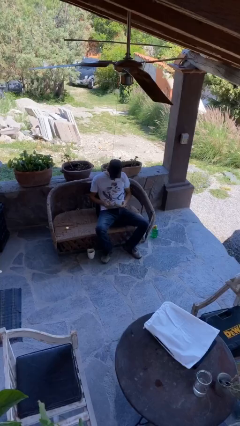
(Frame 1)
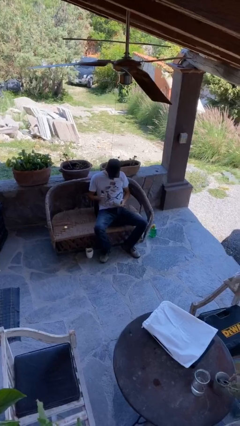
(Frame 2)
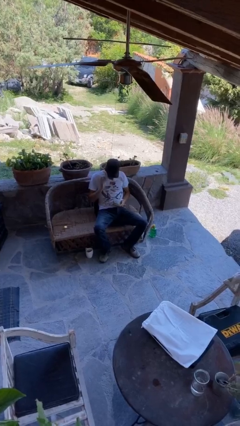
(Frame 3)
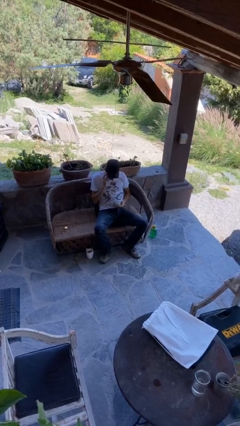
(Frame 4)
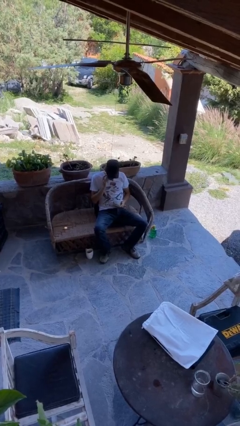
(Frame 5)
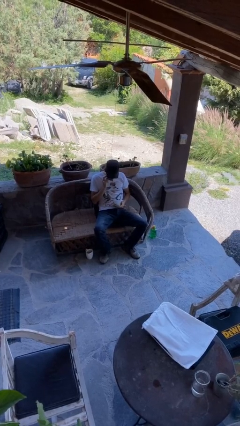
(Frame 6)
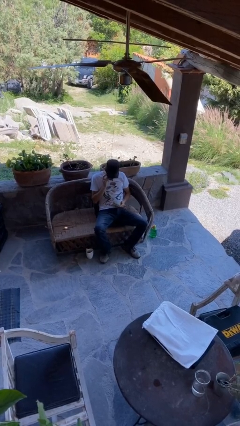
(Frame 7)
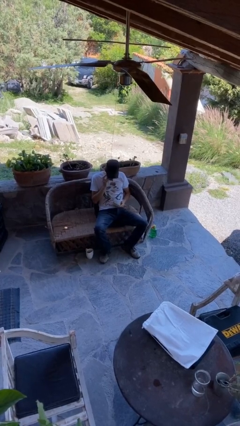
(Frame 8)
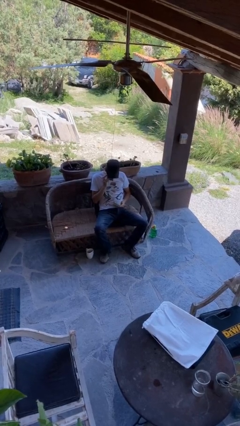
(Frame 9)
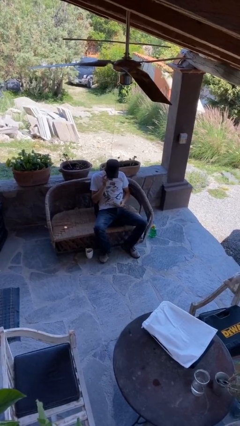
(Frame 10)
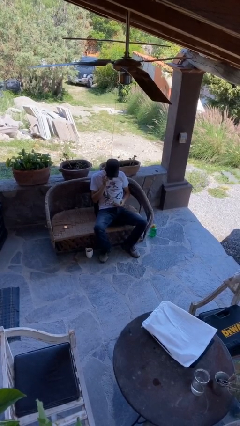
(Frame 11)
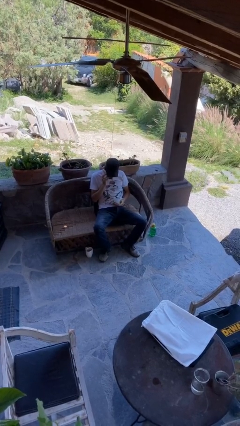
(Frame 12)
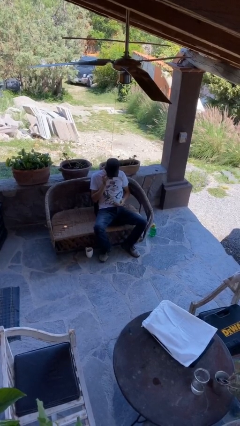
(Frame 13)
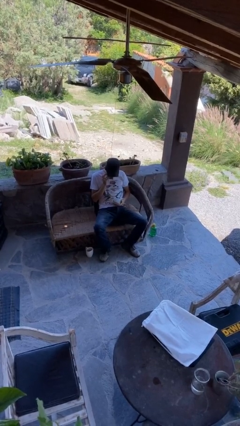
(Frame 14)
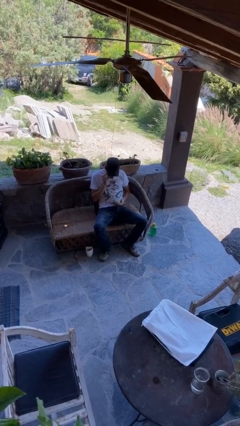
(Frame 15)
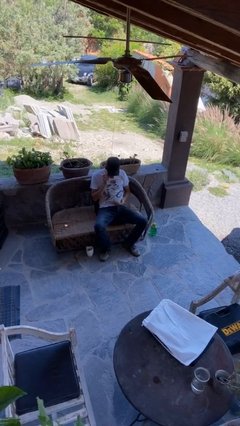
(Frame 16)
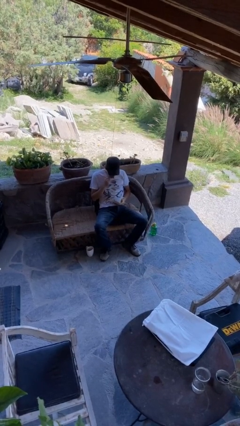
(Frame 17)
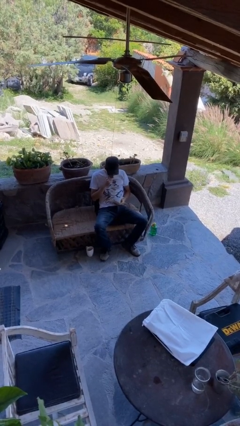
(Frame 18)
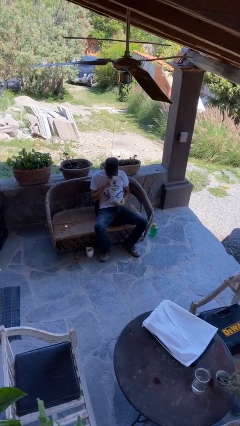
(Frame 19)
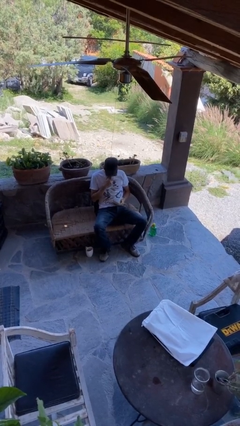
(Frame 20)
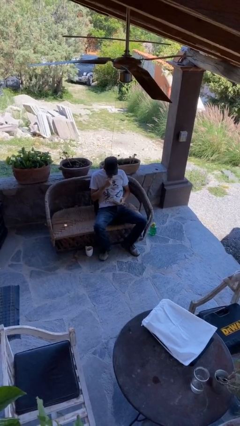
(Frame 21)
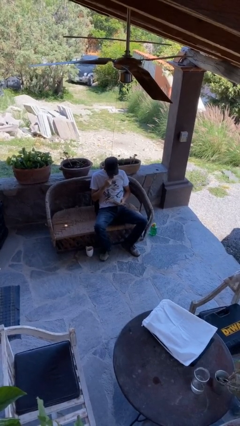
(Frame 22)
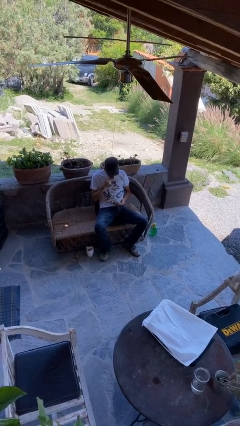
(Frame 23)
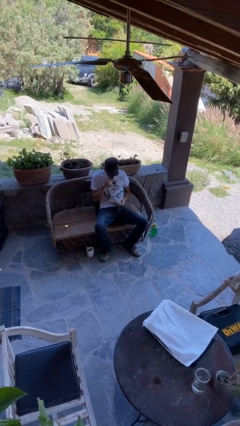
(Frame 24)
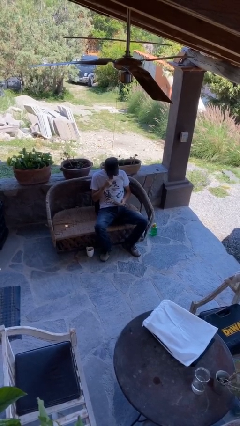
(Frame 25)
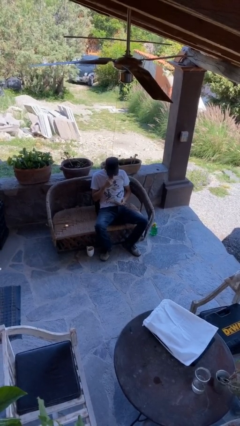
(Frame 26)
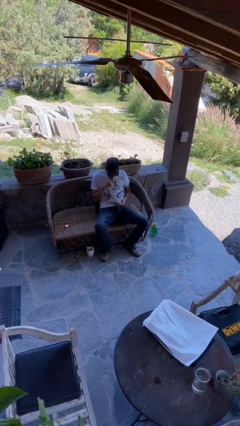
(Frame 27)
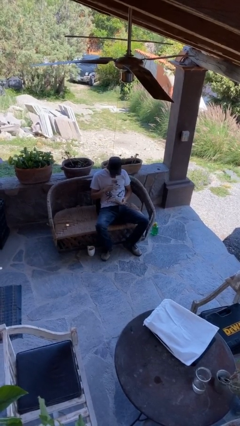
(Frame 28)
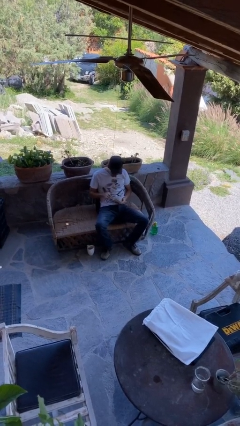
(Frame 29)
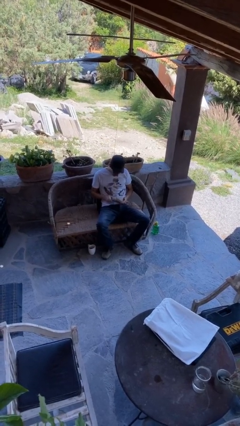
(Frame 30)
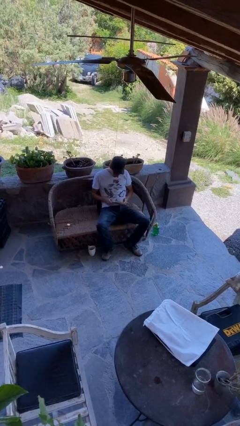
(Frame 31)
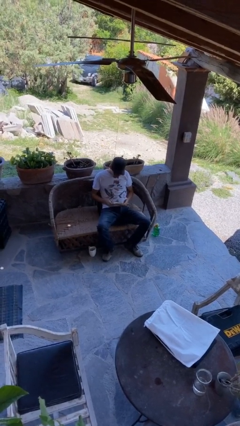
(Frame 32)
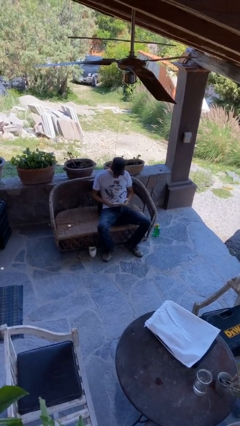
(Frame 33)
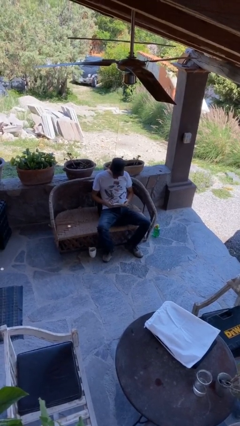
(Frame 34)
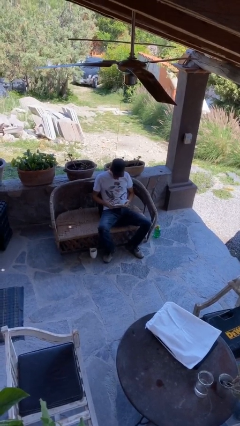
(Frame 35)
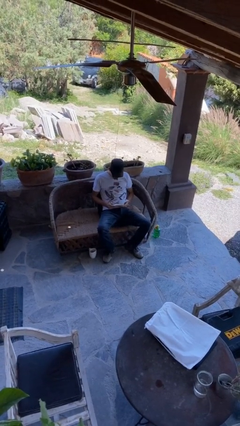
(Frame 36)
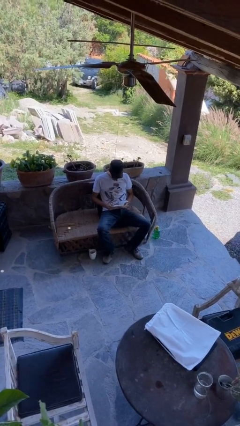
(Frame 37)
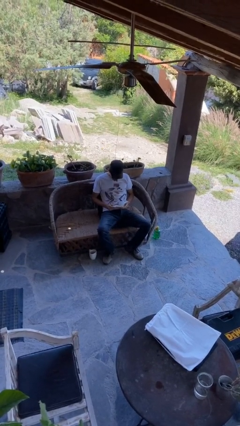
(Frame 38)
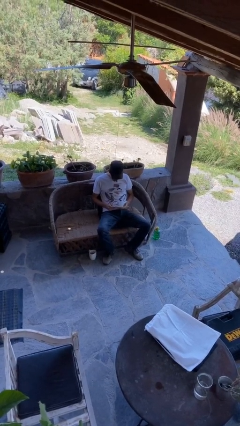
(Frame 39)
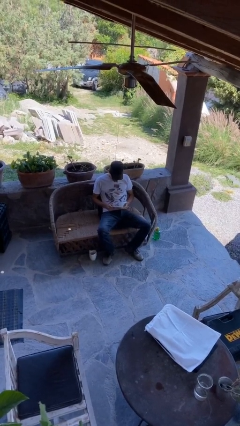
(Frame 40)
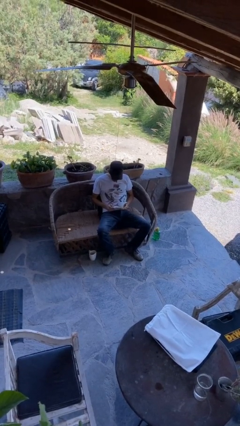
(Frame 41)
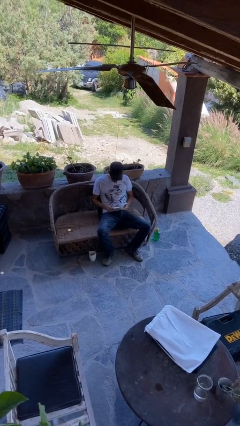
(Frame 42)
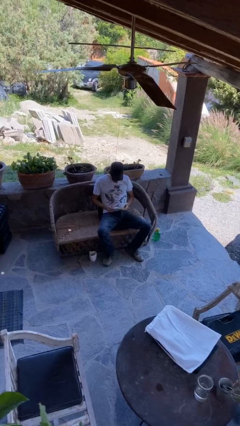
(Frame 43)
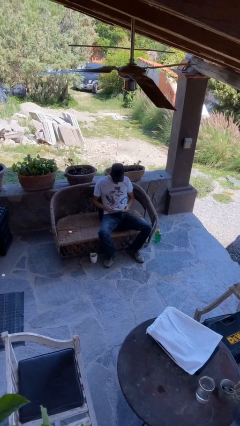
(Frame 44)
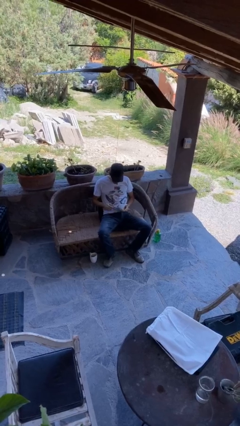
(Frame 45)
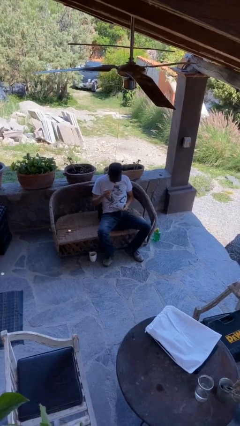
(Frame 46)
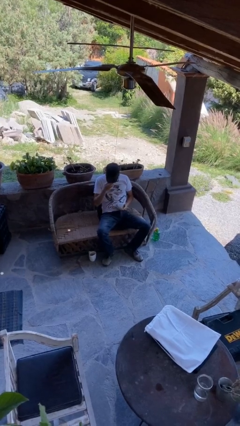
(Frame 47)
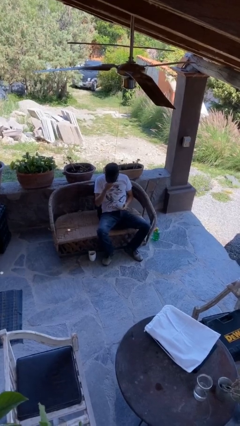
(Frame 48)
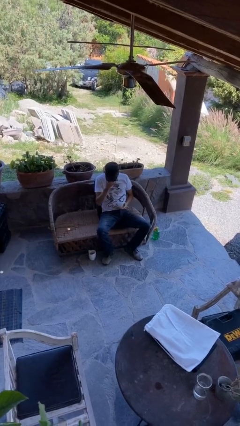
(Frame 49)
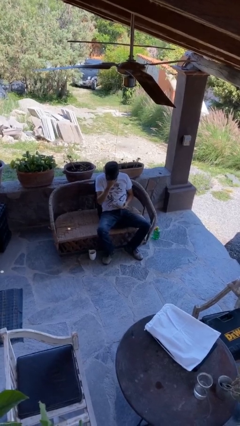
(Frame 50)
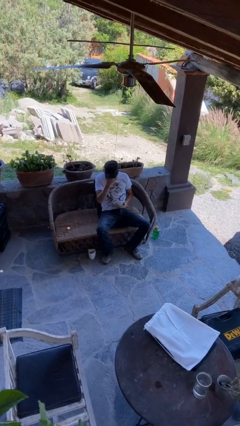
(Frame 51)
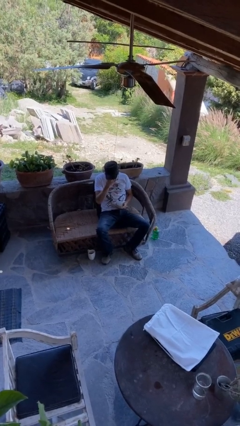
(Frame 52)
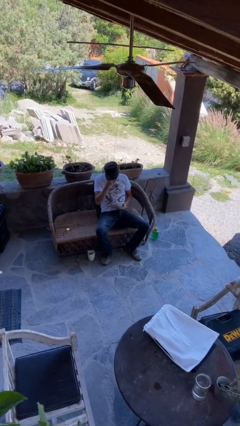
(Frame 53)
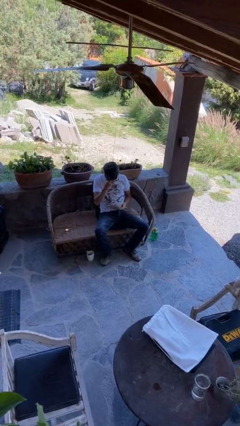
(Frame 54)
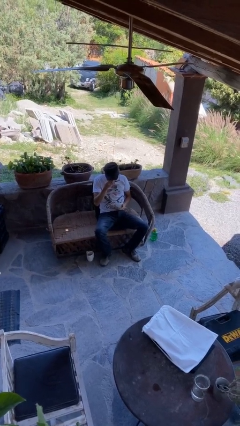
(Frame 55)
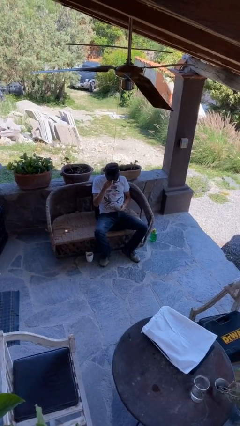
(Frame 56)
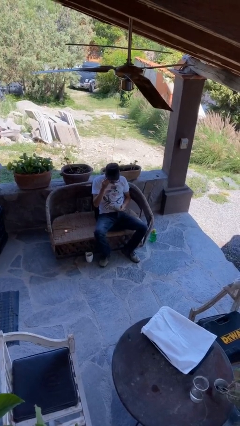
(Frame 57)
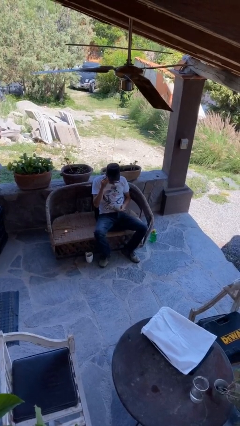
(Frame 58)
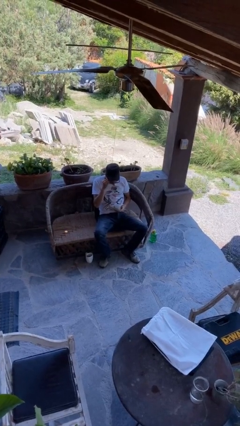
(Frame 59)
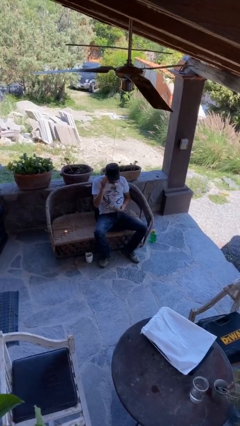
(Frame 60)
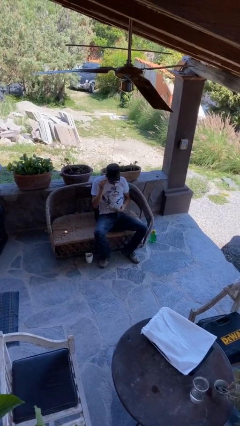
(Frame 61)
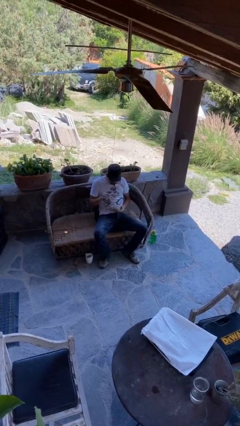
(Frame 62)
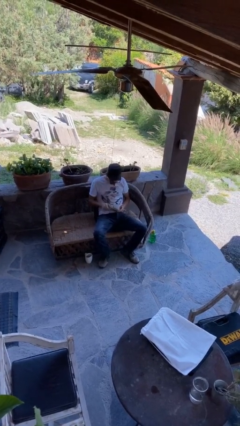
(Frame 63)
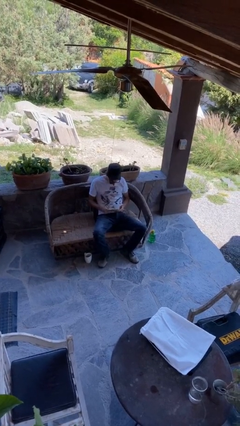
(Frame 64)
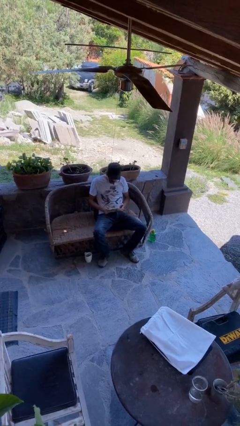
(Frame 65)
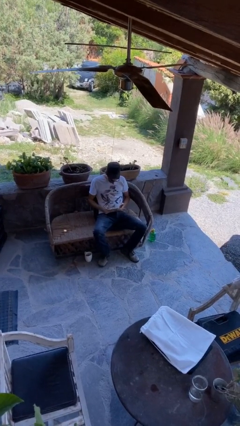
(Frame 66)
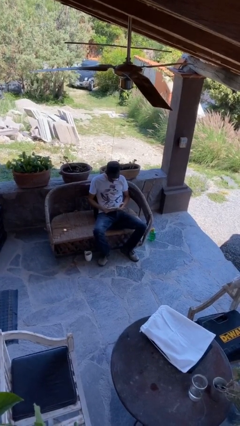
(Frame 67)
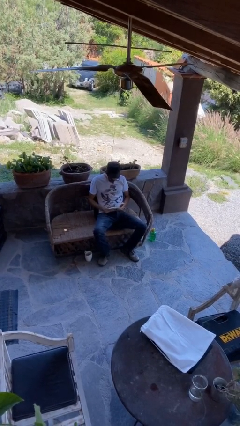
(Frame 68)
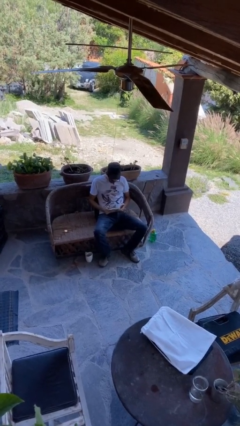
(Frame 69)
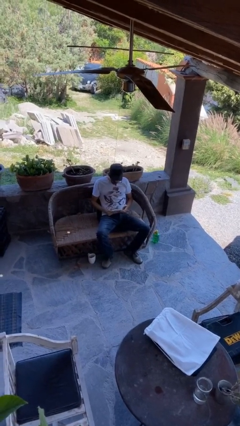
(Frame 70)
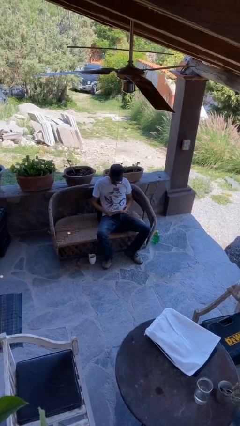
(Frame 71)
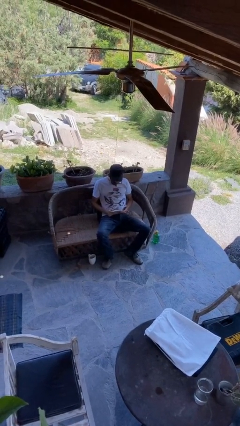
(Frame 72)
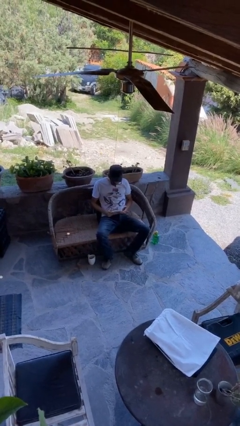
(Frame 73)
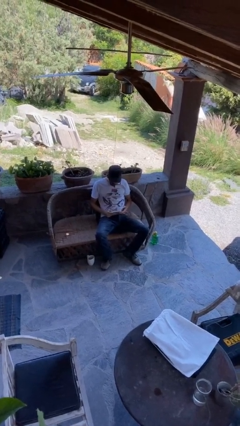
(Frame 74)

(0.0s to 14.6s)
person reads document

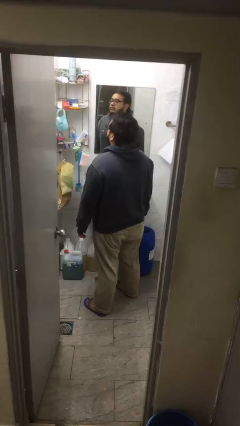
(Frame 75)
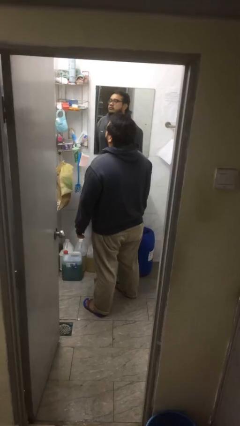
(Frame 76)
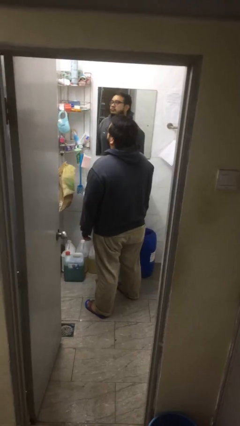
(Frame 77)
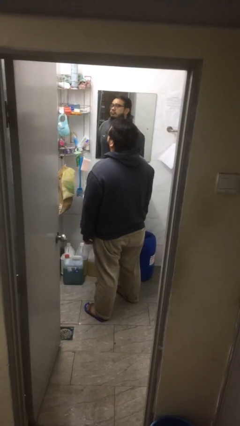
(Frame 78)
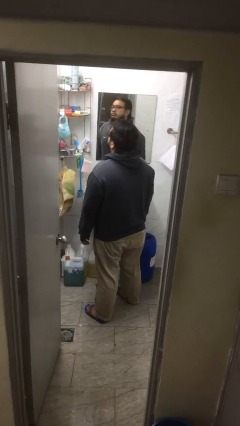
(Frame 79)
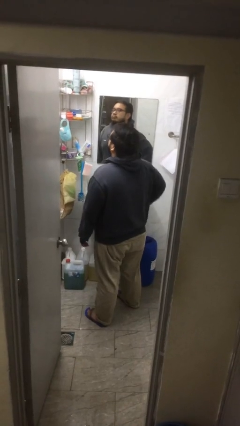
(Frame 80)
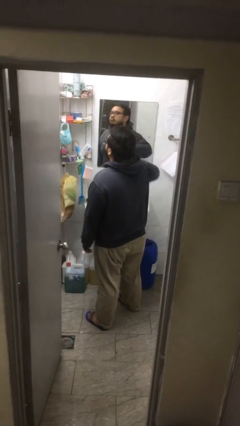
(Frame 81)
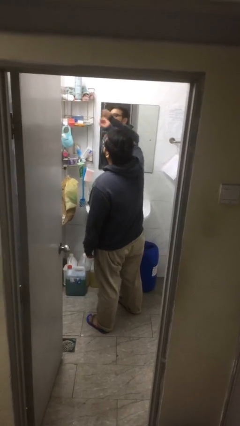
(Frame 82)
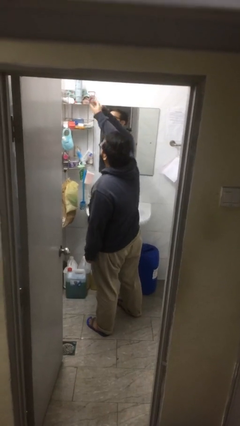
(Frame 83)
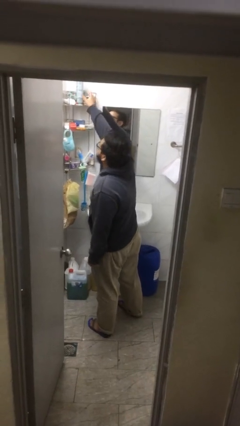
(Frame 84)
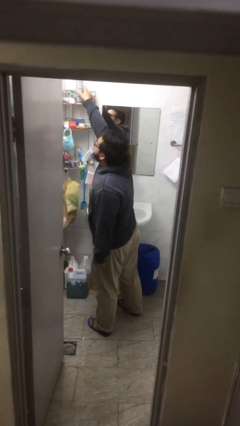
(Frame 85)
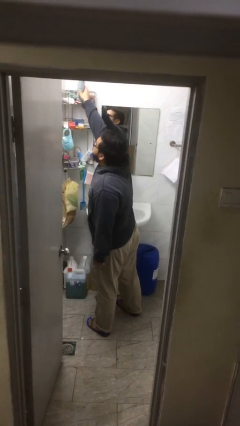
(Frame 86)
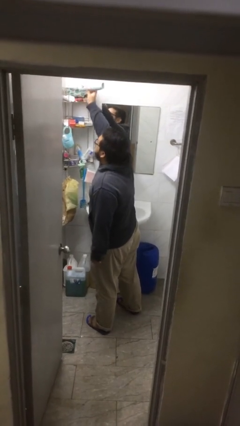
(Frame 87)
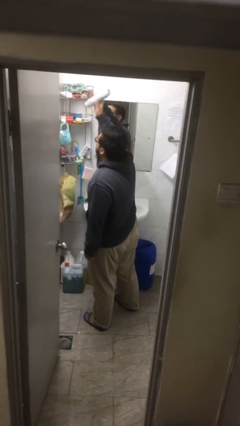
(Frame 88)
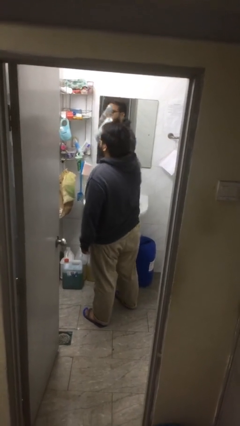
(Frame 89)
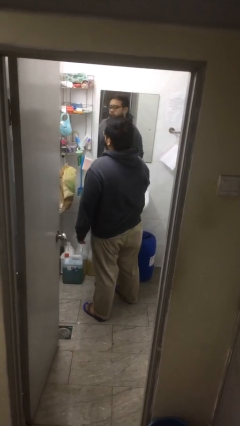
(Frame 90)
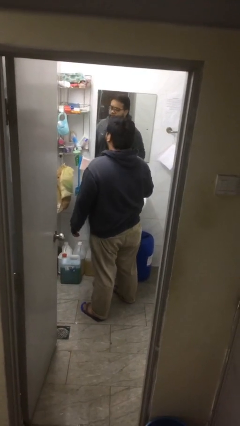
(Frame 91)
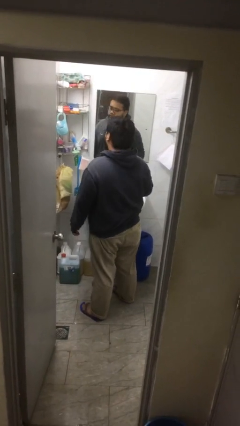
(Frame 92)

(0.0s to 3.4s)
person picks up object from countertop
